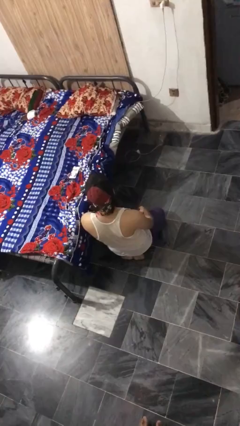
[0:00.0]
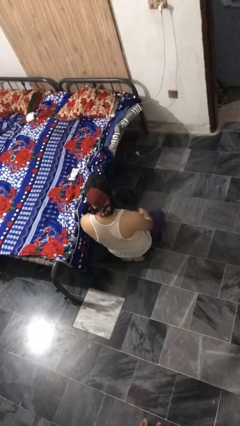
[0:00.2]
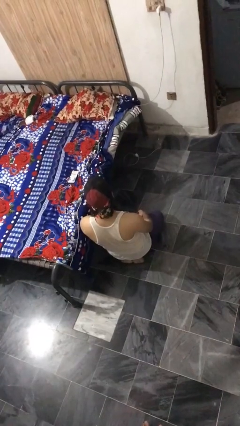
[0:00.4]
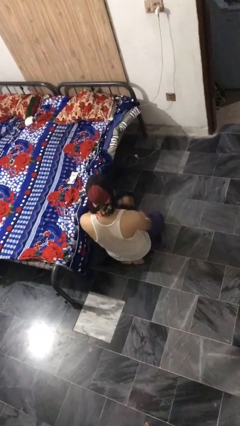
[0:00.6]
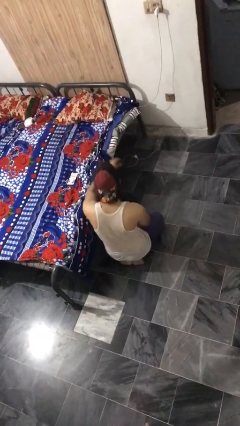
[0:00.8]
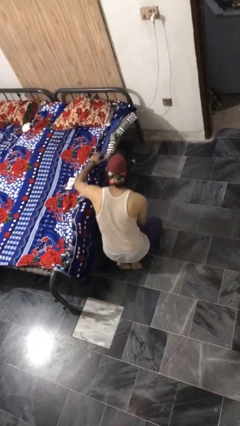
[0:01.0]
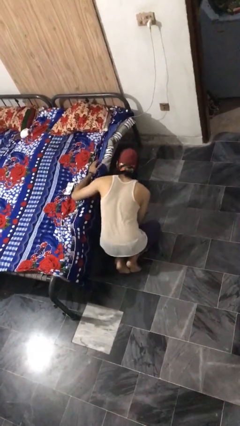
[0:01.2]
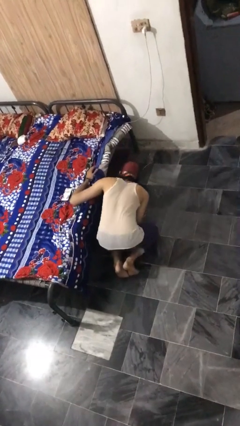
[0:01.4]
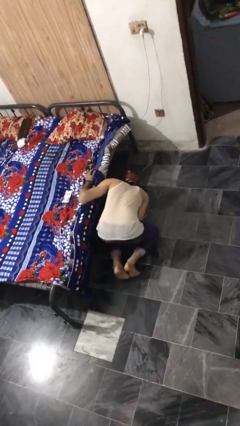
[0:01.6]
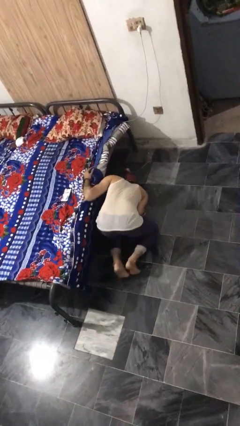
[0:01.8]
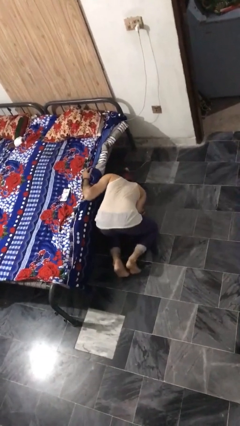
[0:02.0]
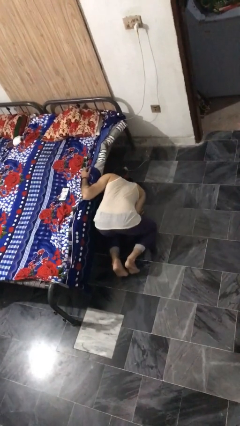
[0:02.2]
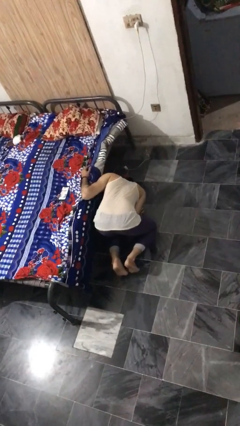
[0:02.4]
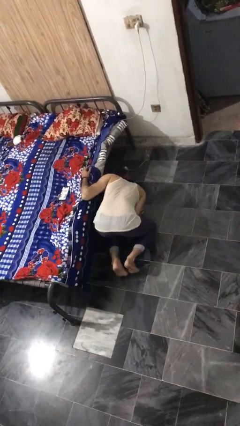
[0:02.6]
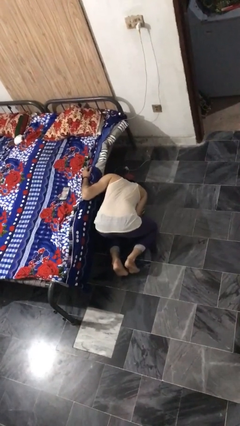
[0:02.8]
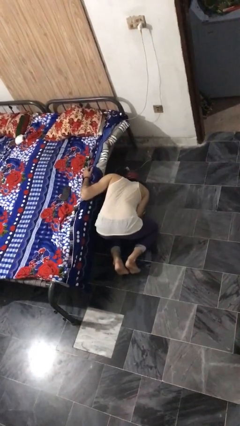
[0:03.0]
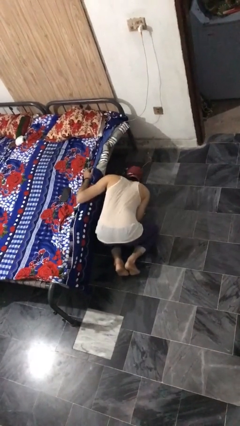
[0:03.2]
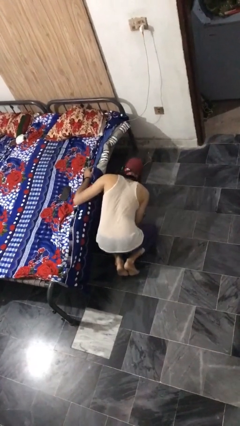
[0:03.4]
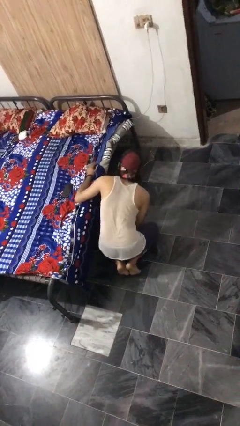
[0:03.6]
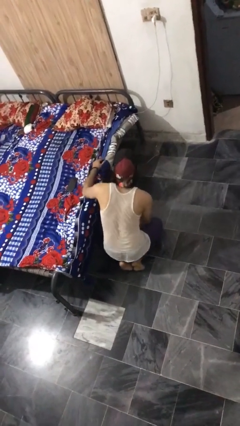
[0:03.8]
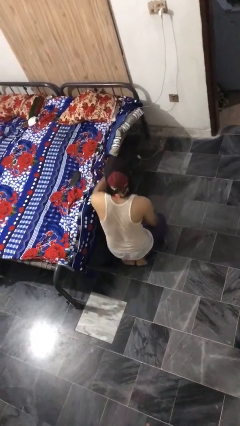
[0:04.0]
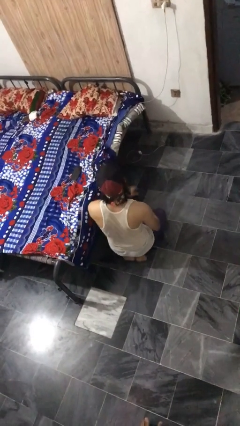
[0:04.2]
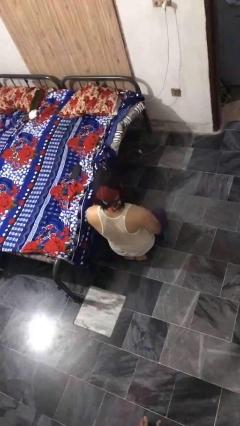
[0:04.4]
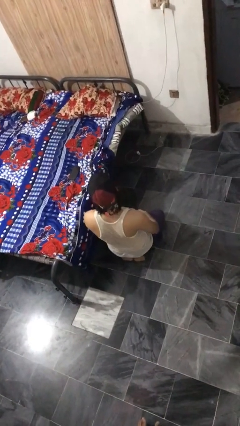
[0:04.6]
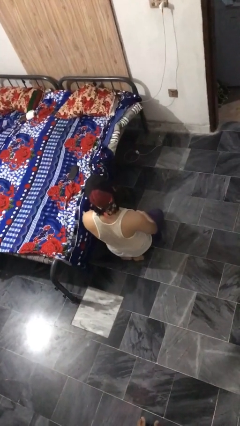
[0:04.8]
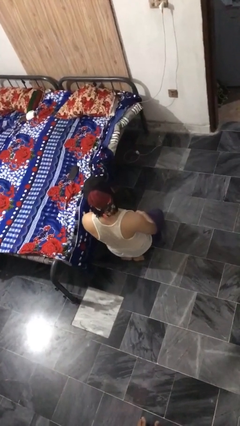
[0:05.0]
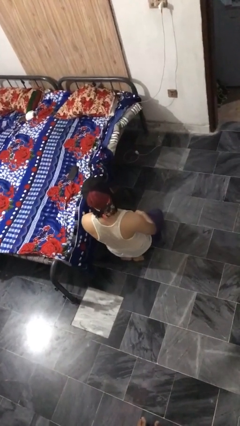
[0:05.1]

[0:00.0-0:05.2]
person searches under bed

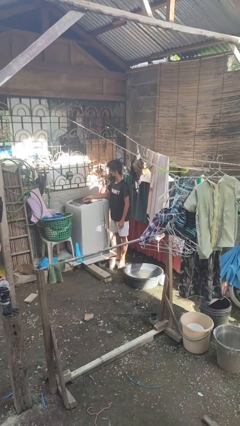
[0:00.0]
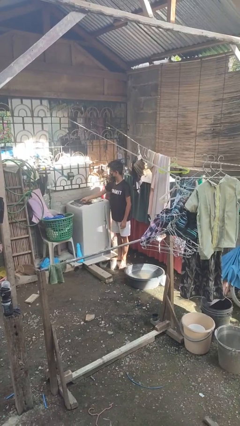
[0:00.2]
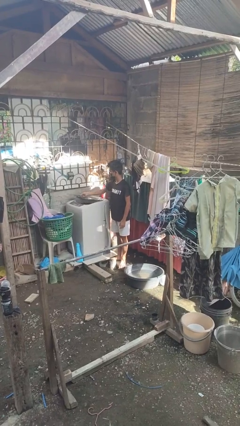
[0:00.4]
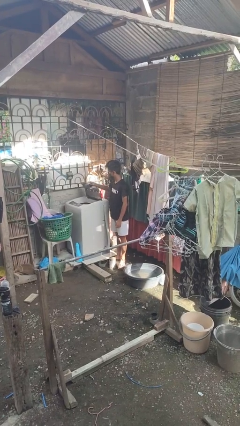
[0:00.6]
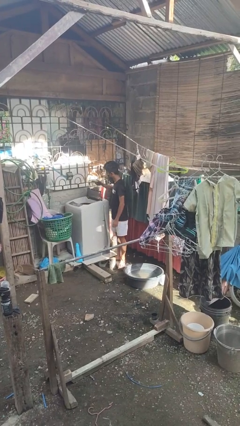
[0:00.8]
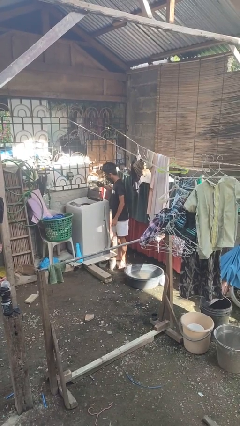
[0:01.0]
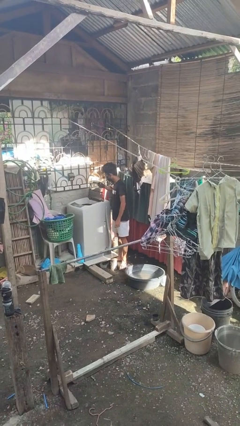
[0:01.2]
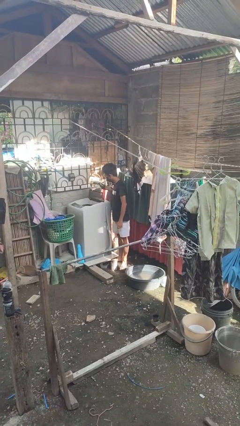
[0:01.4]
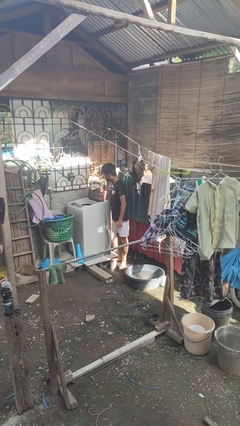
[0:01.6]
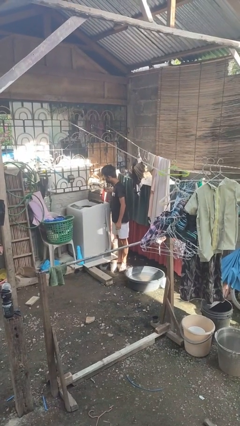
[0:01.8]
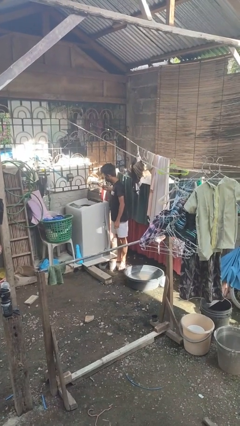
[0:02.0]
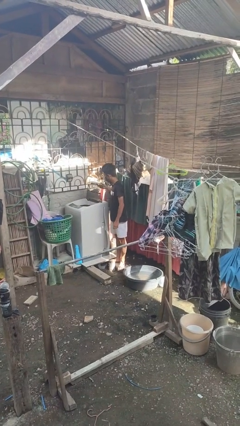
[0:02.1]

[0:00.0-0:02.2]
person opens clothes washer

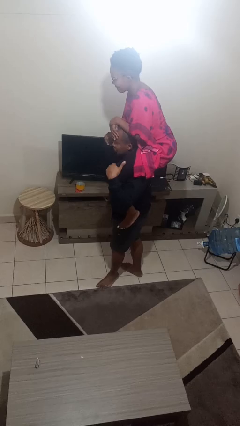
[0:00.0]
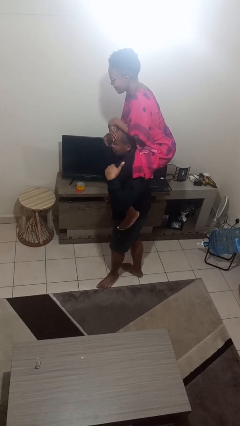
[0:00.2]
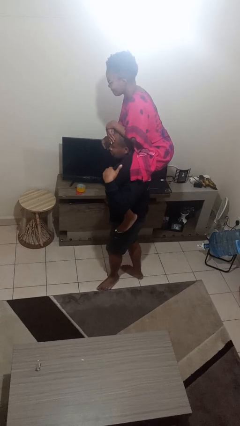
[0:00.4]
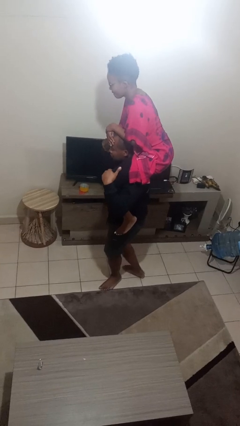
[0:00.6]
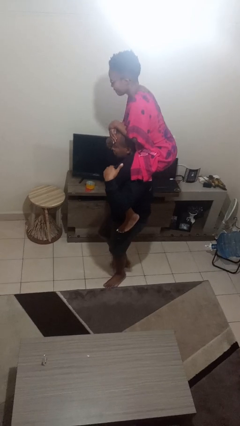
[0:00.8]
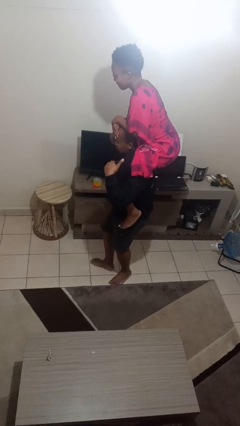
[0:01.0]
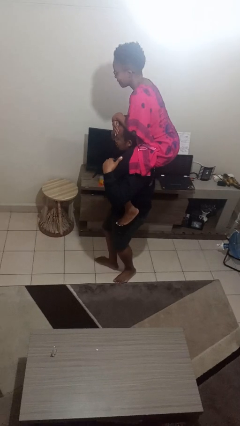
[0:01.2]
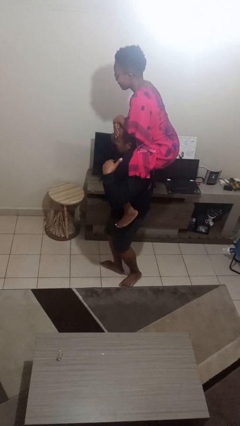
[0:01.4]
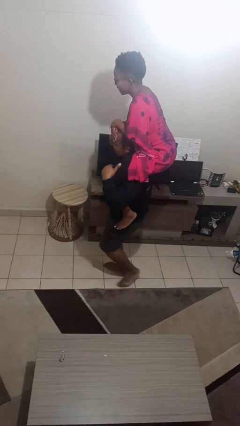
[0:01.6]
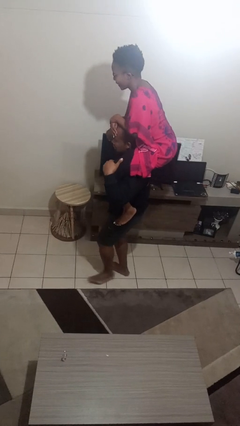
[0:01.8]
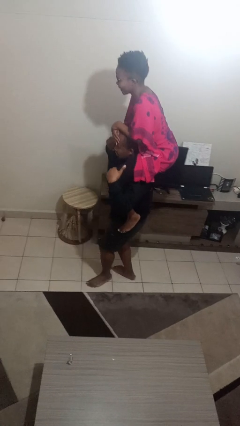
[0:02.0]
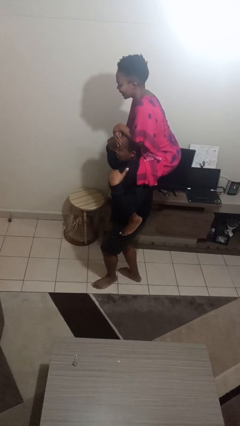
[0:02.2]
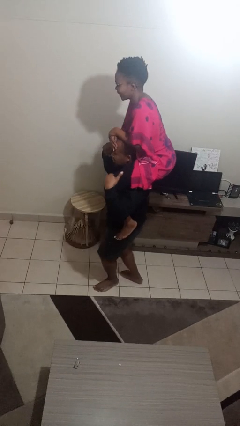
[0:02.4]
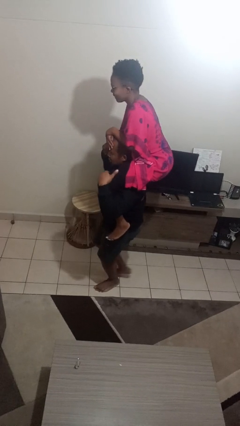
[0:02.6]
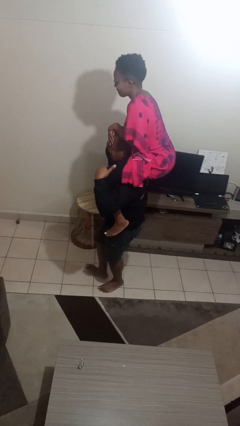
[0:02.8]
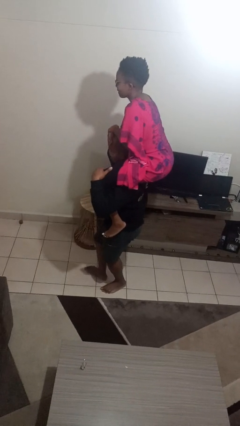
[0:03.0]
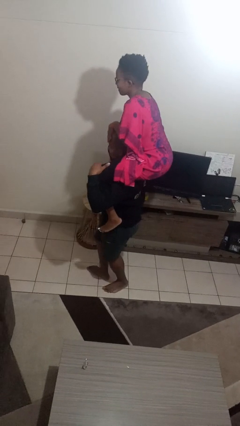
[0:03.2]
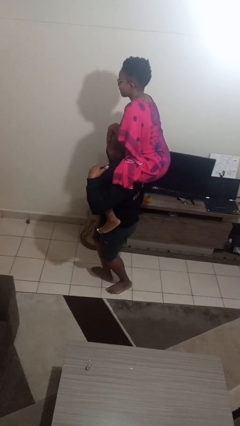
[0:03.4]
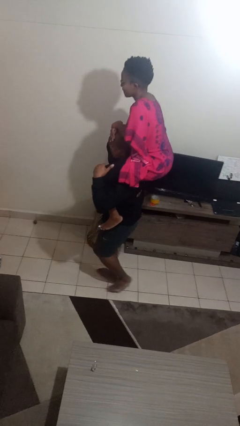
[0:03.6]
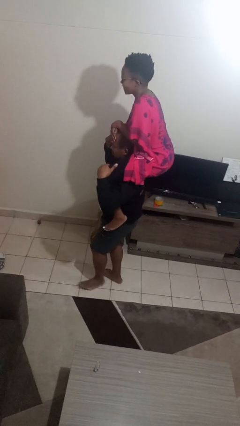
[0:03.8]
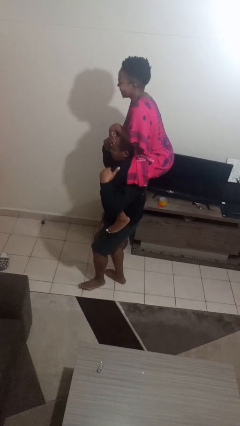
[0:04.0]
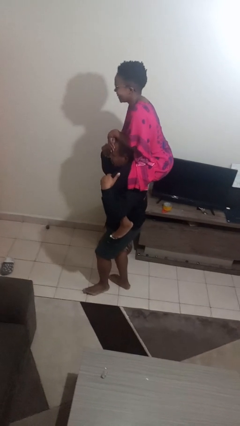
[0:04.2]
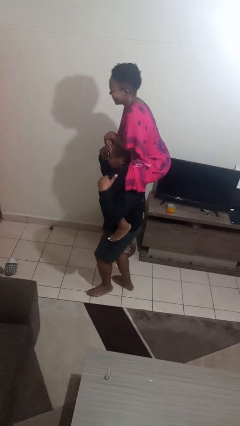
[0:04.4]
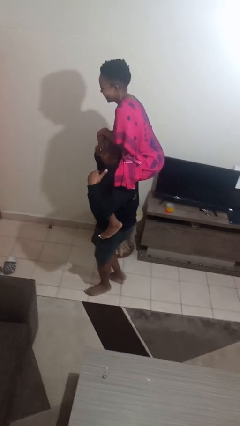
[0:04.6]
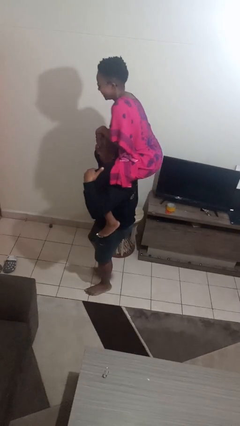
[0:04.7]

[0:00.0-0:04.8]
person carries person on shoulders

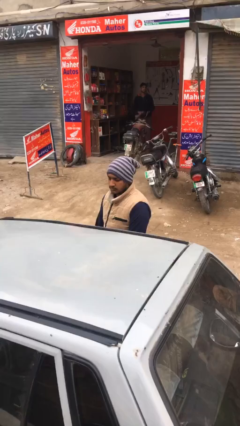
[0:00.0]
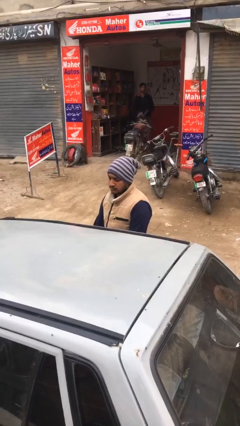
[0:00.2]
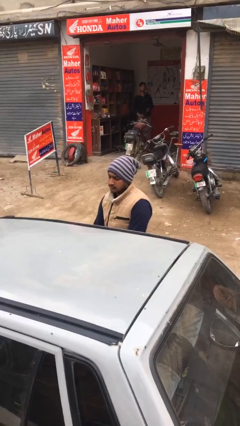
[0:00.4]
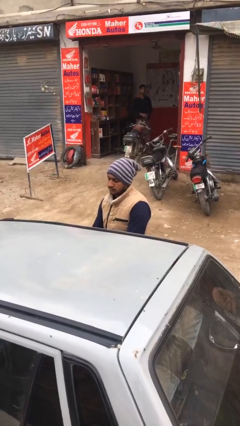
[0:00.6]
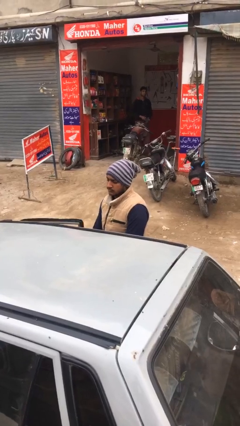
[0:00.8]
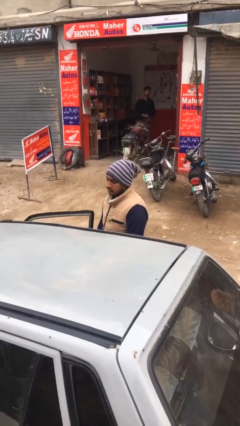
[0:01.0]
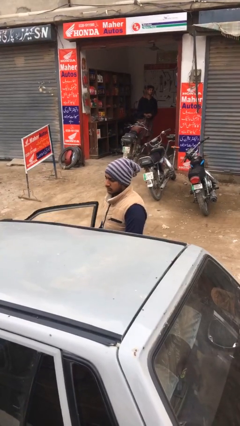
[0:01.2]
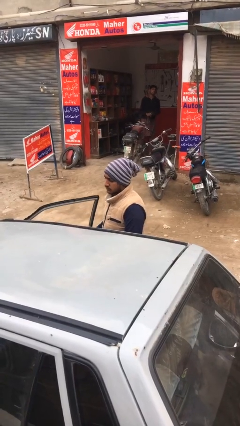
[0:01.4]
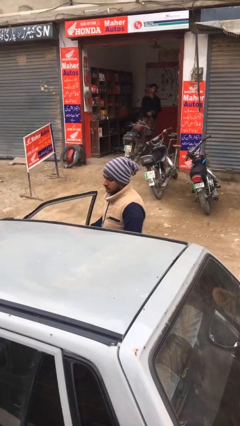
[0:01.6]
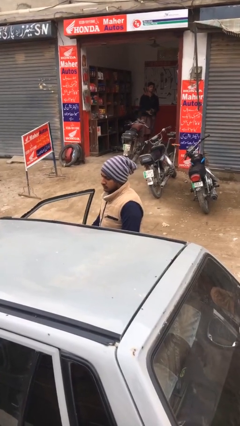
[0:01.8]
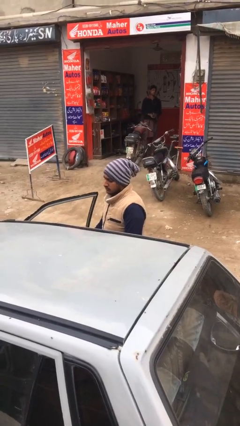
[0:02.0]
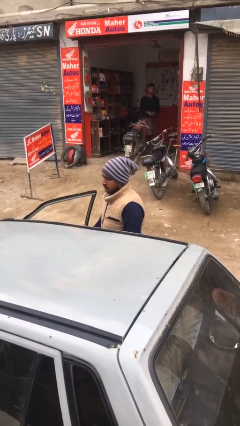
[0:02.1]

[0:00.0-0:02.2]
person opens car door

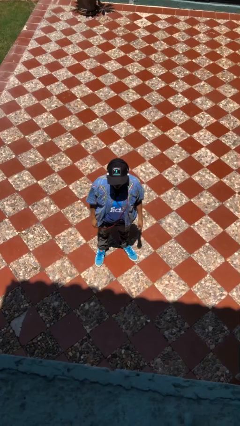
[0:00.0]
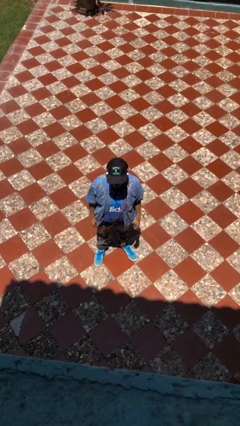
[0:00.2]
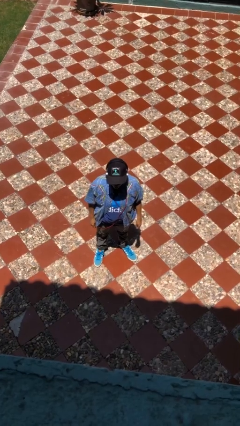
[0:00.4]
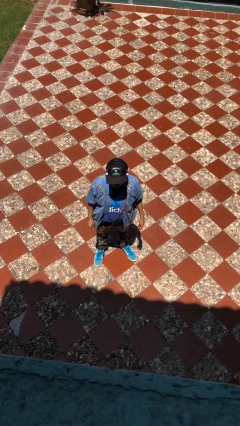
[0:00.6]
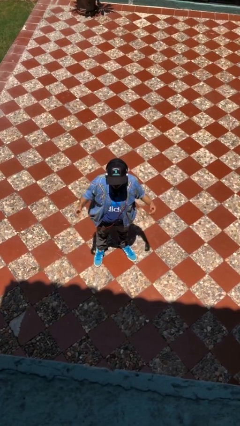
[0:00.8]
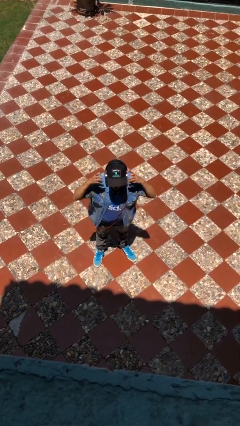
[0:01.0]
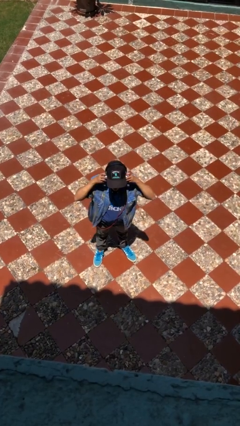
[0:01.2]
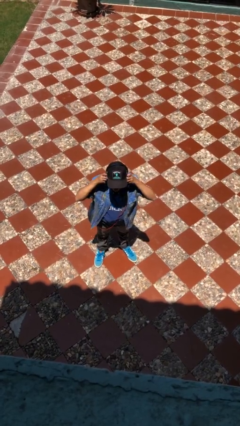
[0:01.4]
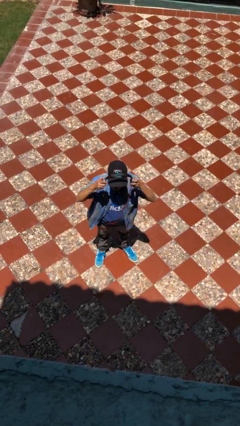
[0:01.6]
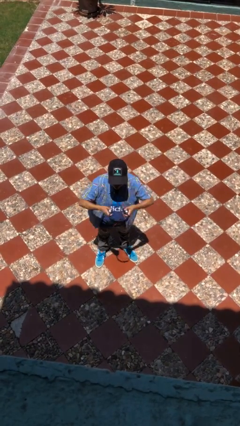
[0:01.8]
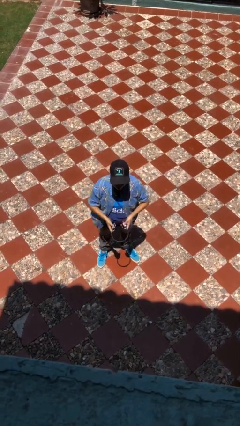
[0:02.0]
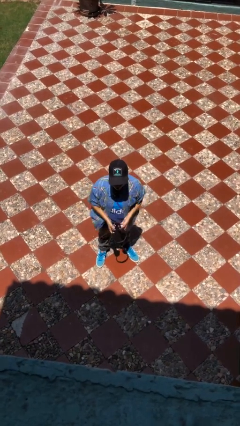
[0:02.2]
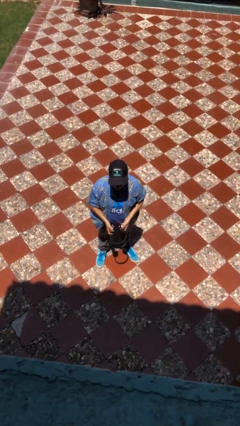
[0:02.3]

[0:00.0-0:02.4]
person takes off headphones

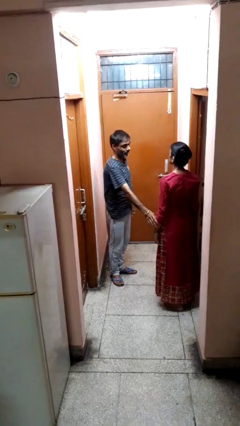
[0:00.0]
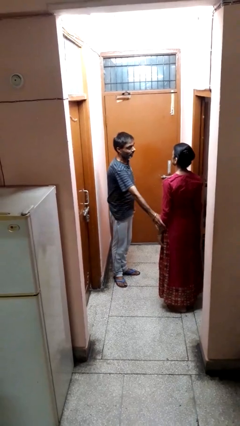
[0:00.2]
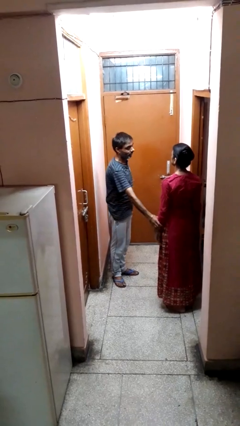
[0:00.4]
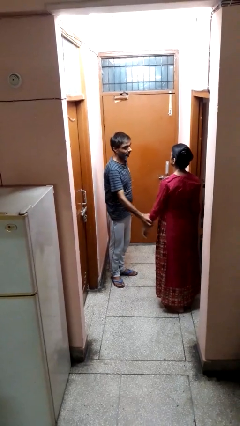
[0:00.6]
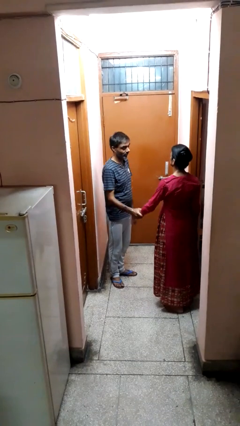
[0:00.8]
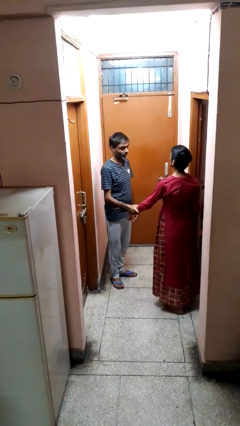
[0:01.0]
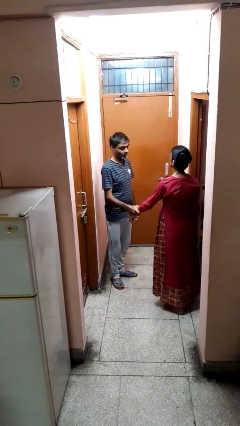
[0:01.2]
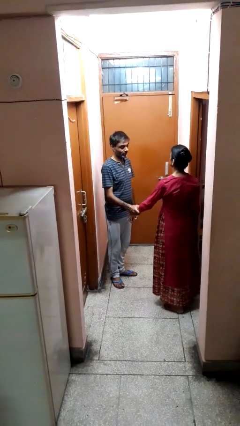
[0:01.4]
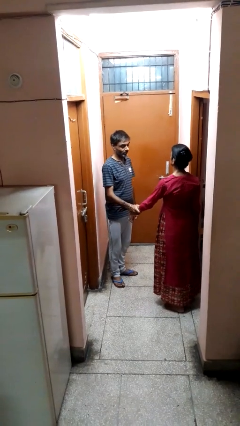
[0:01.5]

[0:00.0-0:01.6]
person grabs person by forearm
